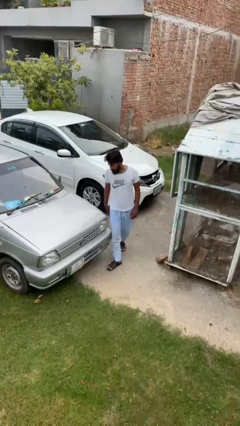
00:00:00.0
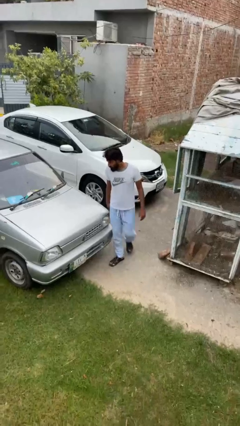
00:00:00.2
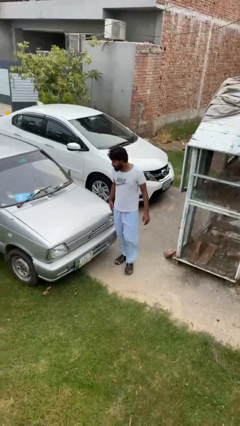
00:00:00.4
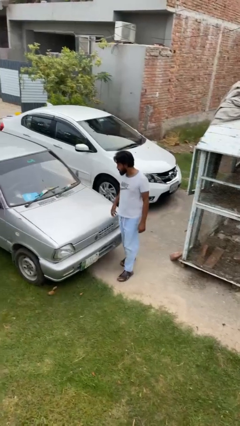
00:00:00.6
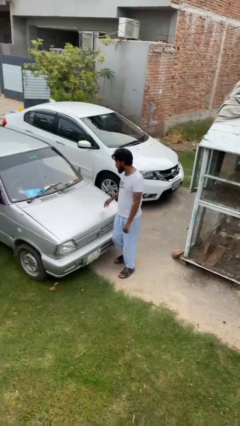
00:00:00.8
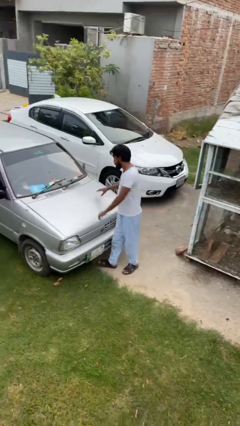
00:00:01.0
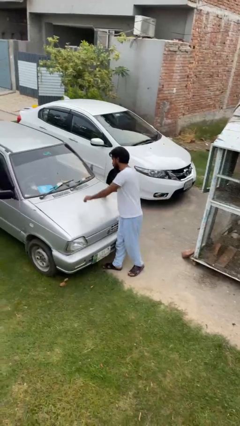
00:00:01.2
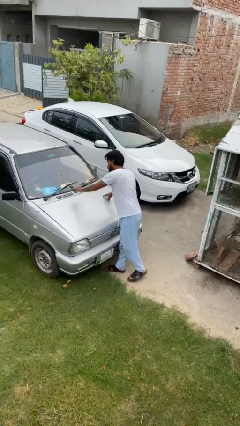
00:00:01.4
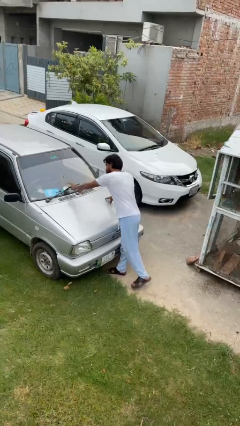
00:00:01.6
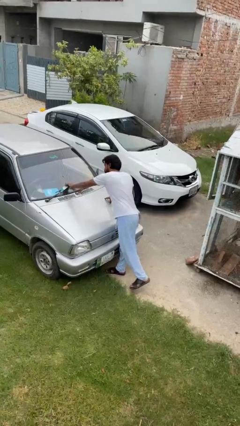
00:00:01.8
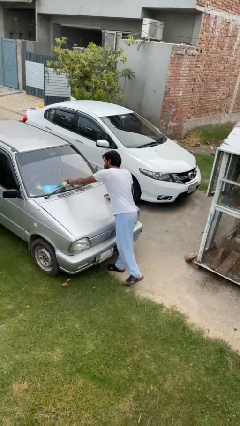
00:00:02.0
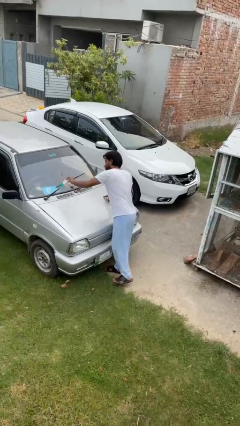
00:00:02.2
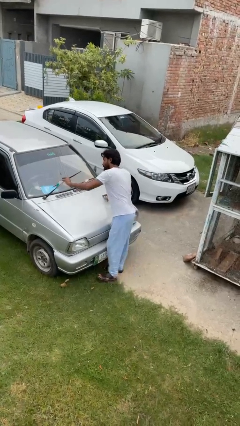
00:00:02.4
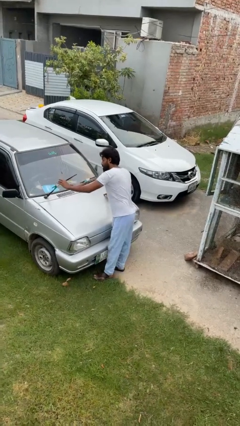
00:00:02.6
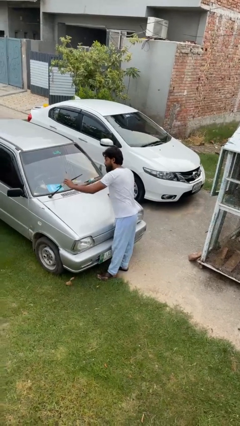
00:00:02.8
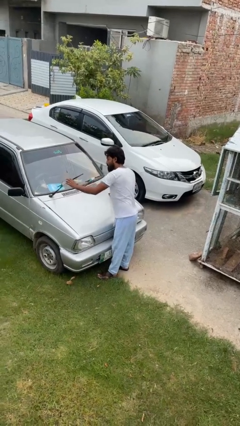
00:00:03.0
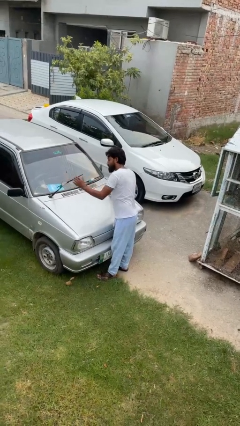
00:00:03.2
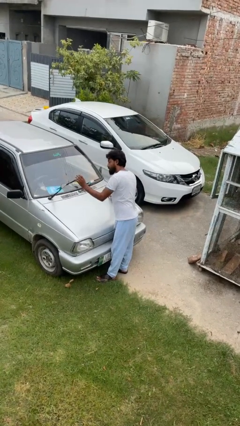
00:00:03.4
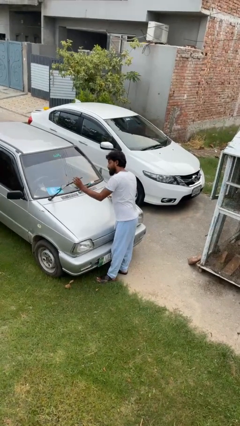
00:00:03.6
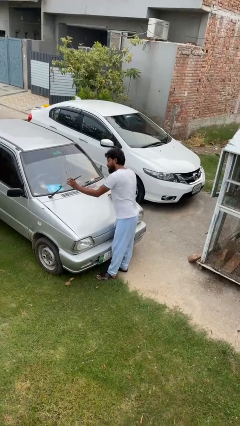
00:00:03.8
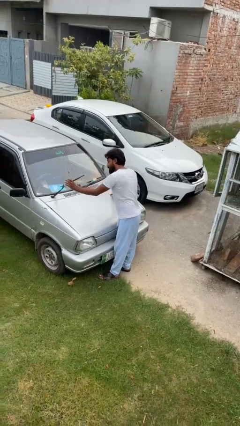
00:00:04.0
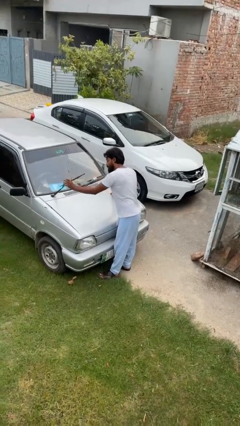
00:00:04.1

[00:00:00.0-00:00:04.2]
person flips up car wipers

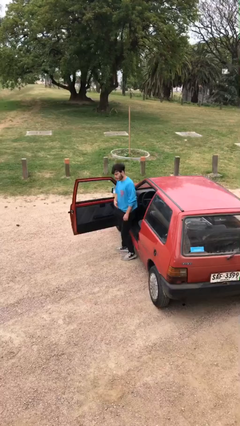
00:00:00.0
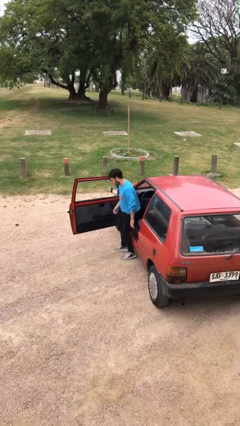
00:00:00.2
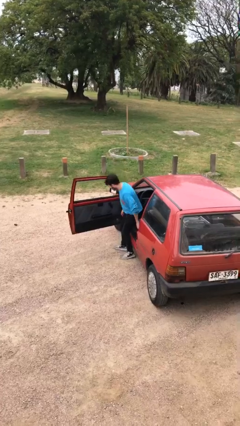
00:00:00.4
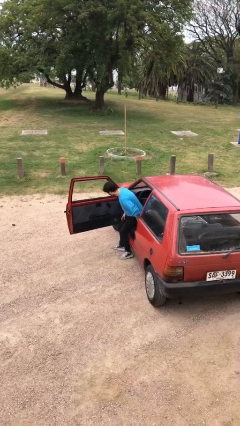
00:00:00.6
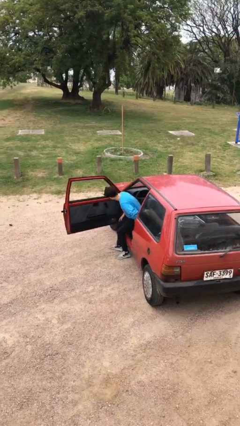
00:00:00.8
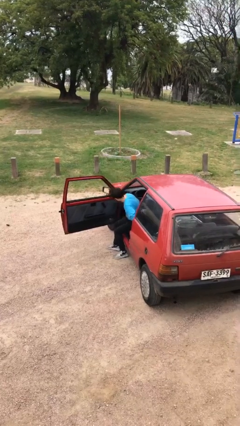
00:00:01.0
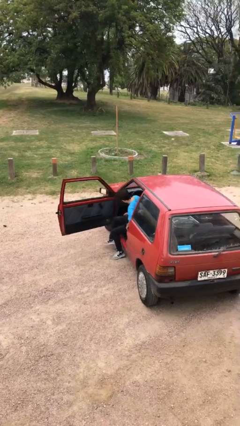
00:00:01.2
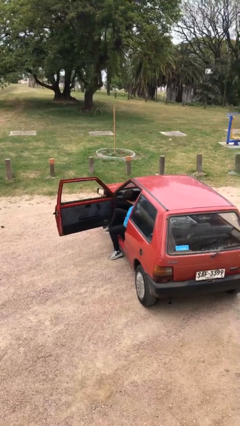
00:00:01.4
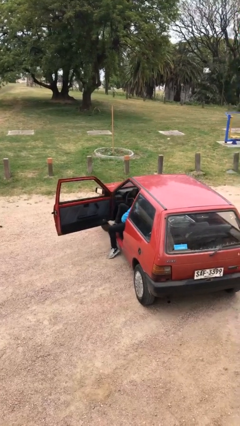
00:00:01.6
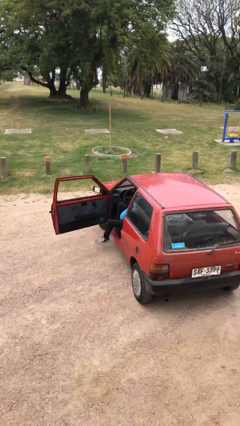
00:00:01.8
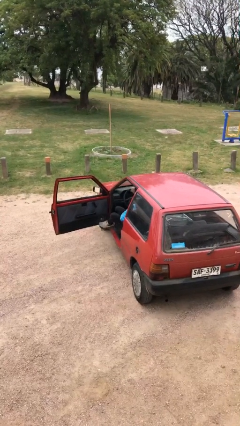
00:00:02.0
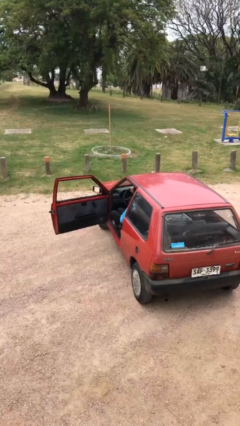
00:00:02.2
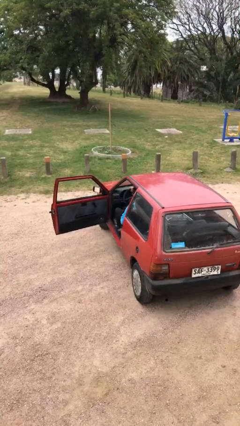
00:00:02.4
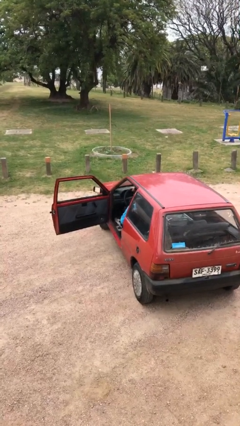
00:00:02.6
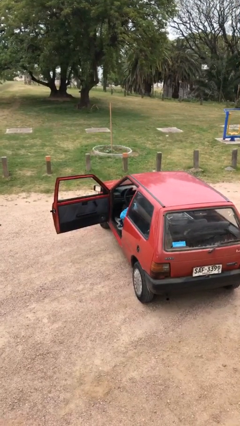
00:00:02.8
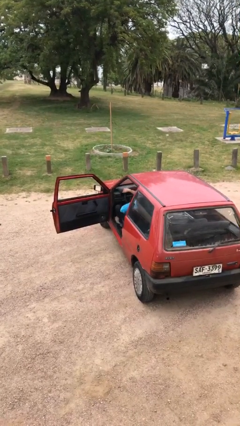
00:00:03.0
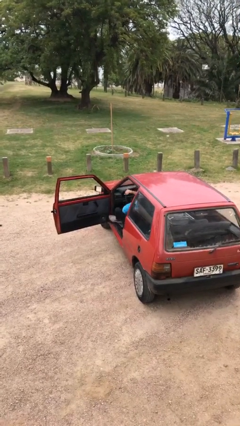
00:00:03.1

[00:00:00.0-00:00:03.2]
person enters car

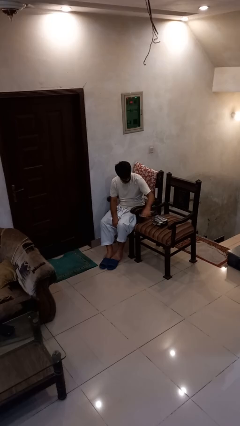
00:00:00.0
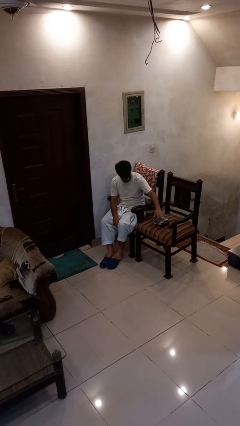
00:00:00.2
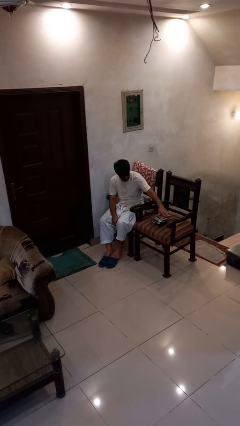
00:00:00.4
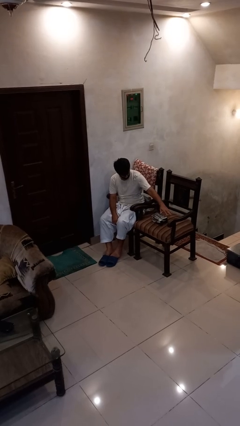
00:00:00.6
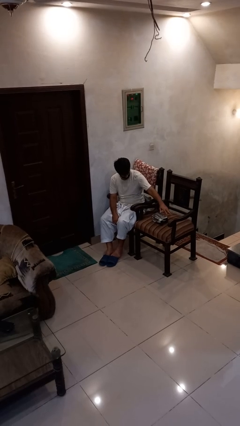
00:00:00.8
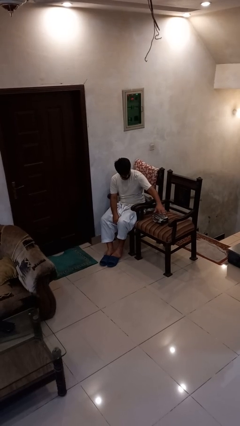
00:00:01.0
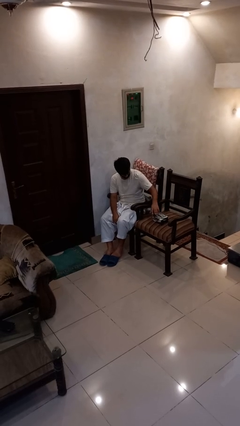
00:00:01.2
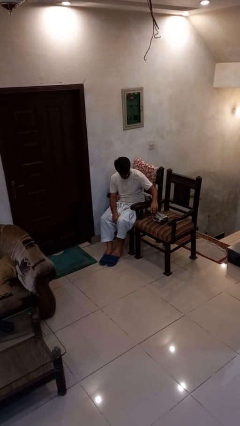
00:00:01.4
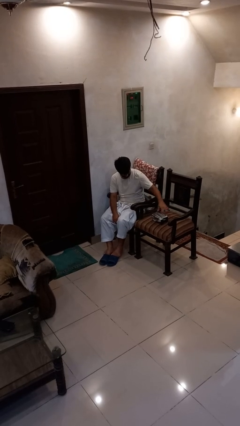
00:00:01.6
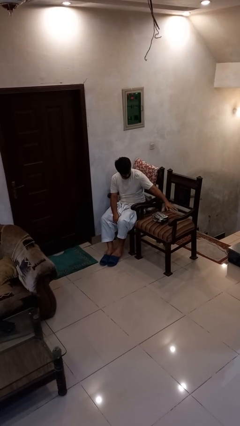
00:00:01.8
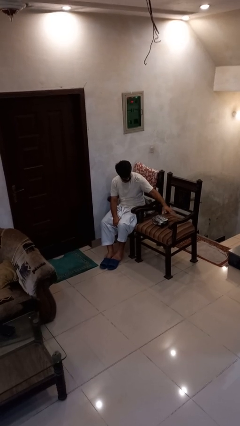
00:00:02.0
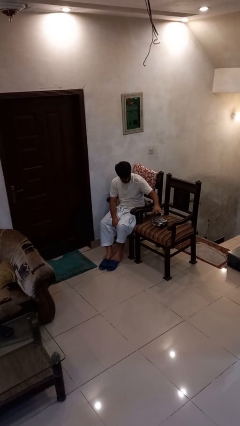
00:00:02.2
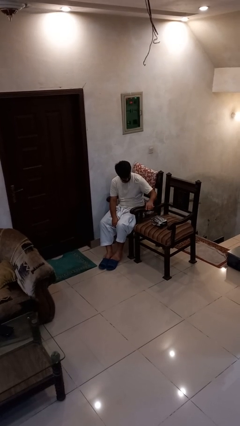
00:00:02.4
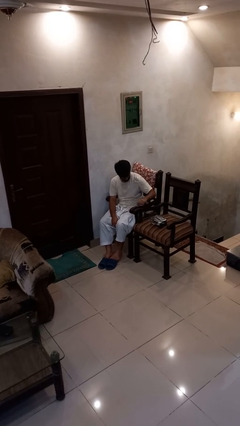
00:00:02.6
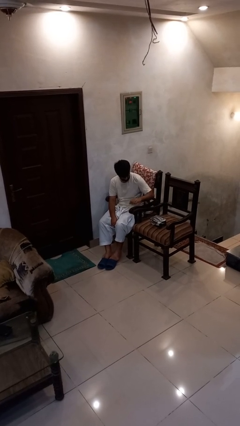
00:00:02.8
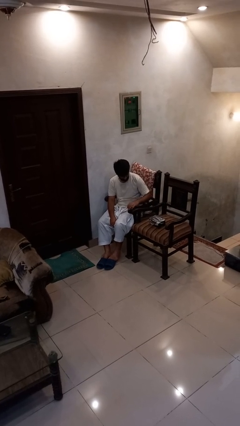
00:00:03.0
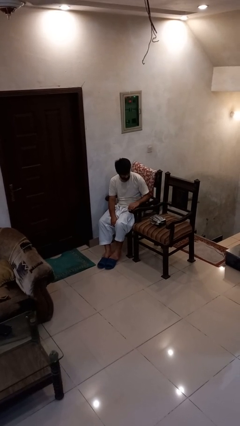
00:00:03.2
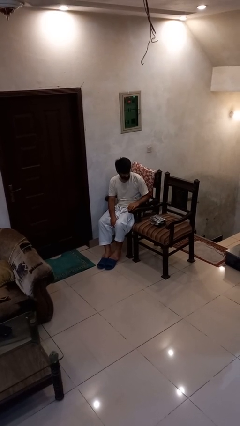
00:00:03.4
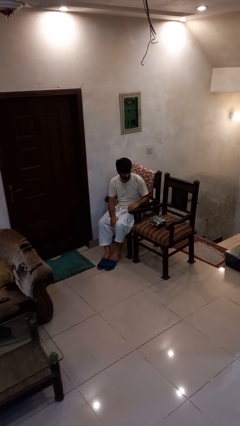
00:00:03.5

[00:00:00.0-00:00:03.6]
person waves hand over object

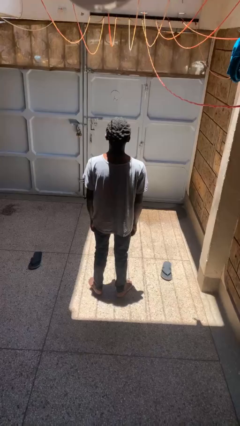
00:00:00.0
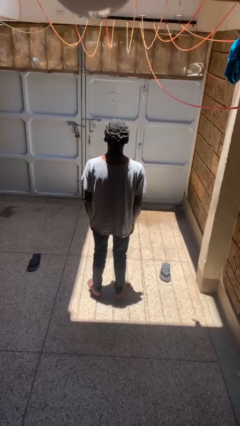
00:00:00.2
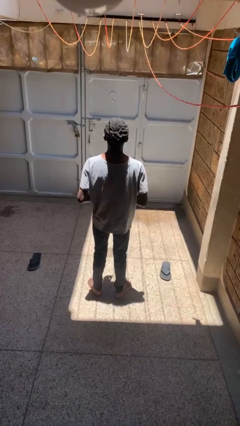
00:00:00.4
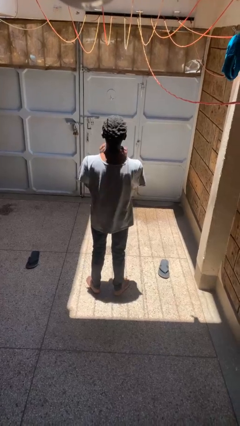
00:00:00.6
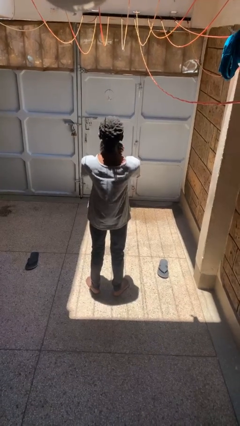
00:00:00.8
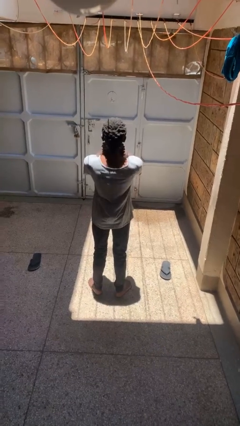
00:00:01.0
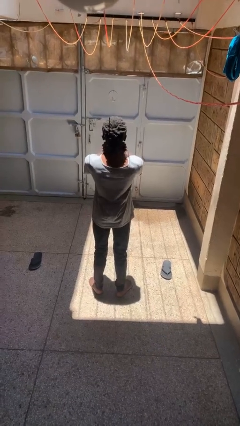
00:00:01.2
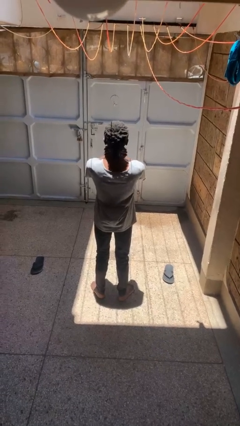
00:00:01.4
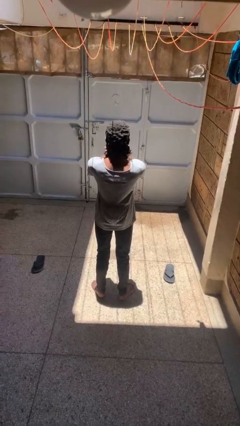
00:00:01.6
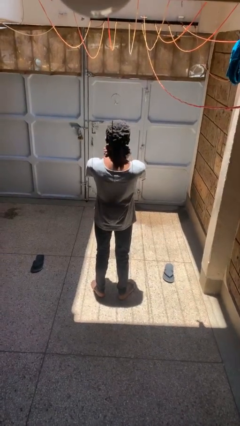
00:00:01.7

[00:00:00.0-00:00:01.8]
person rubs neck

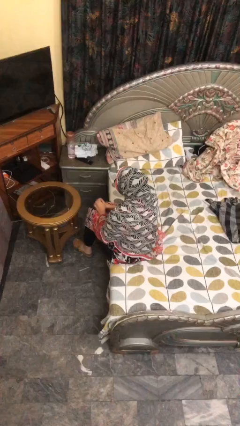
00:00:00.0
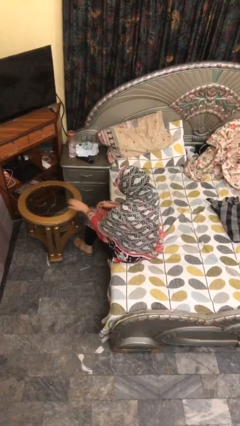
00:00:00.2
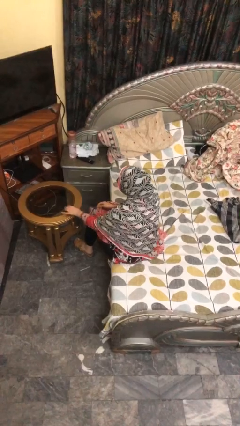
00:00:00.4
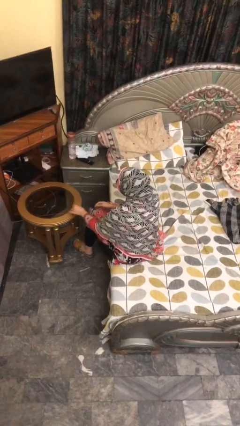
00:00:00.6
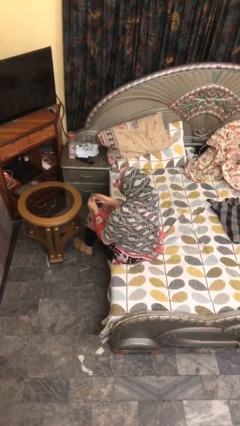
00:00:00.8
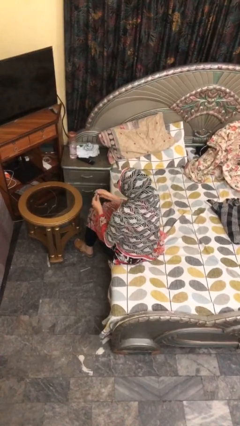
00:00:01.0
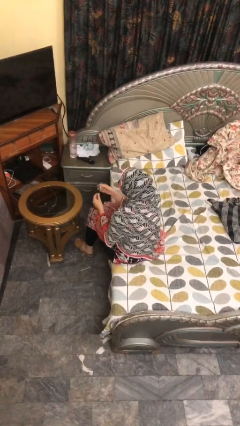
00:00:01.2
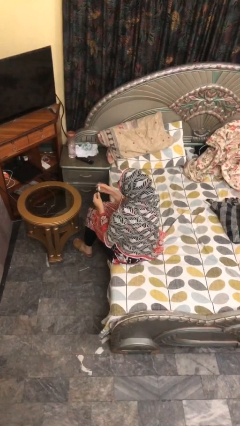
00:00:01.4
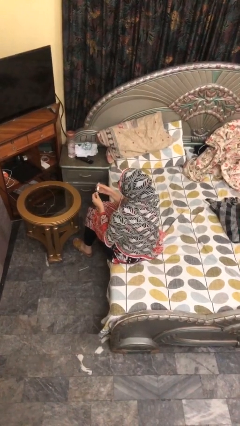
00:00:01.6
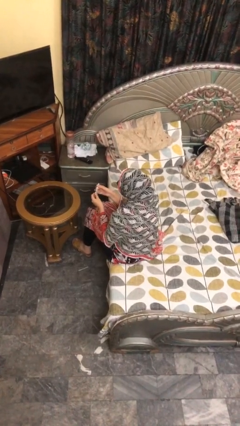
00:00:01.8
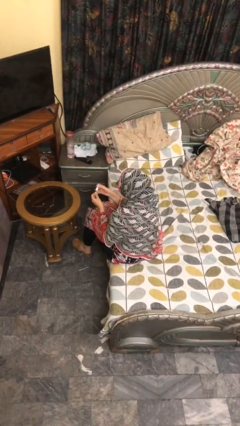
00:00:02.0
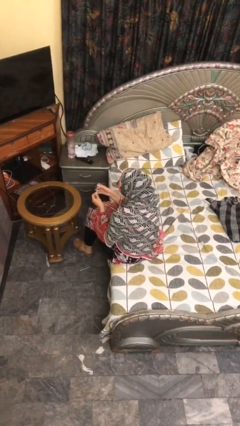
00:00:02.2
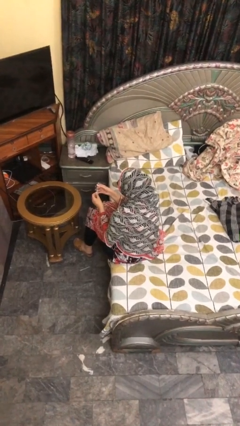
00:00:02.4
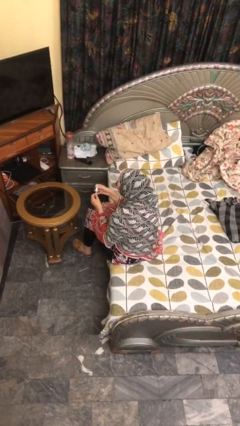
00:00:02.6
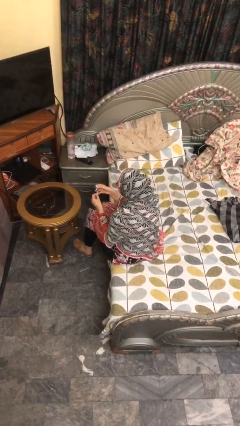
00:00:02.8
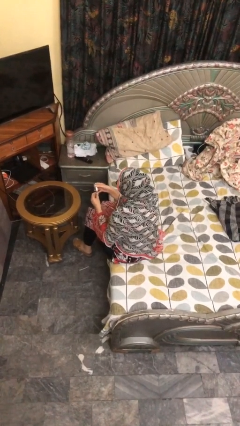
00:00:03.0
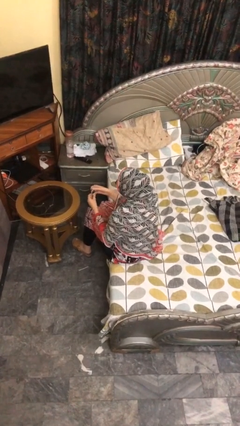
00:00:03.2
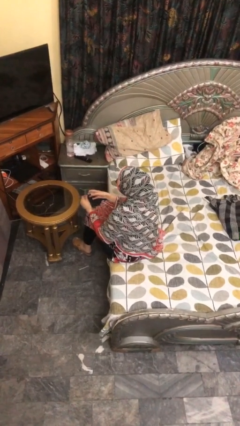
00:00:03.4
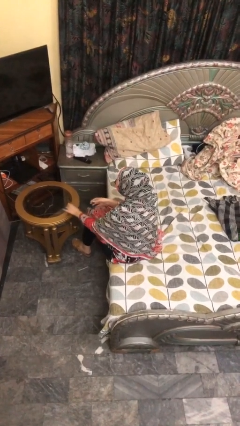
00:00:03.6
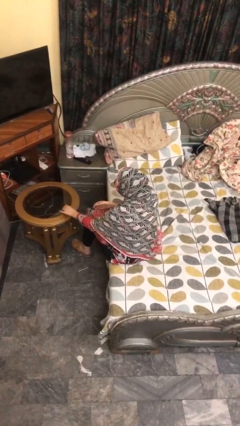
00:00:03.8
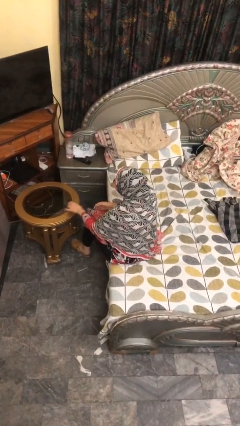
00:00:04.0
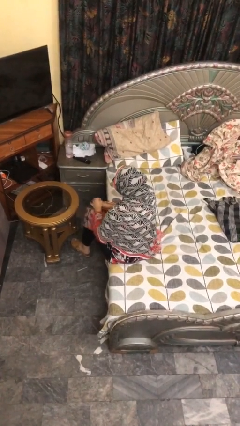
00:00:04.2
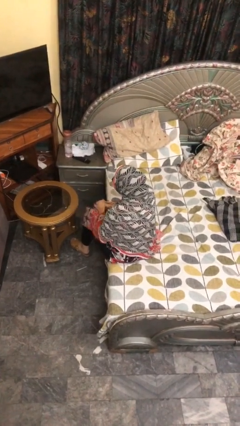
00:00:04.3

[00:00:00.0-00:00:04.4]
person clips fingernails

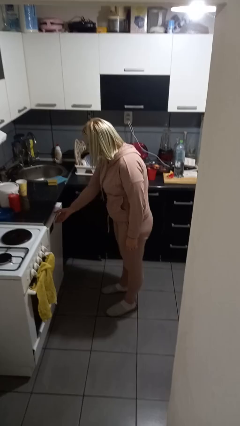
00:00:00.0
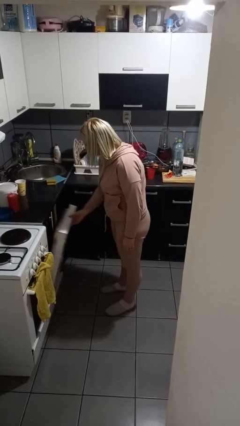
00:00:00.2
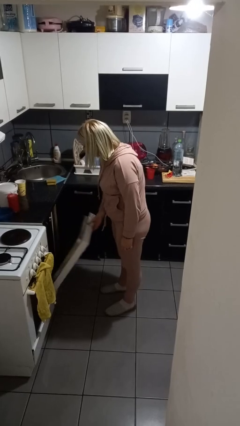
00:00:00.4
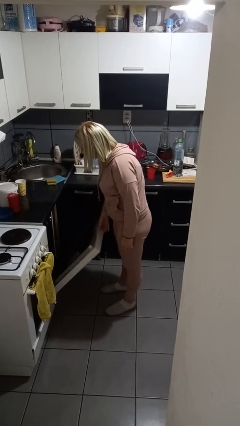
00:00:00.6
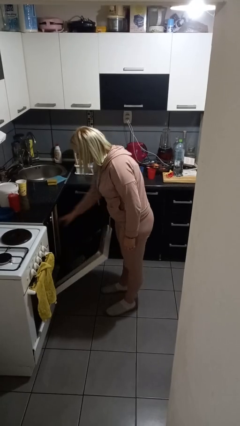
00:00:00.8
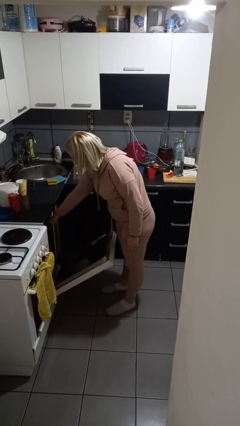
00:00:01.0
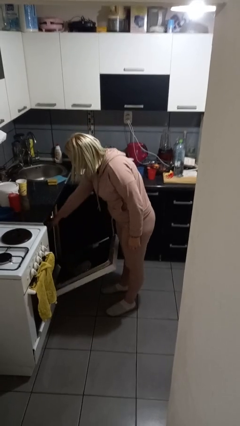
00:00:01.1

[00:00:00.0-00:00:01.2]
person opens dishwasher
